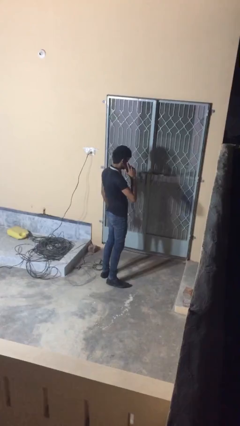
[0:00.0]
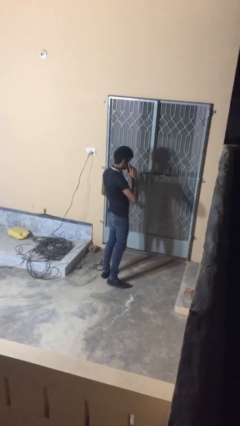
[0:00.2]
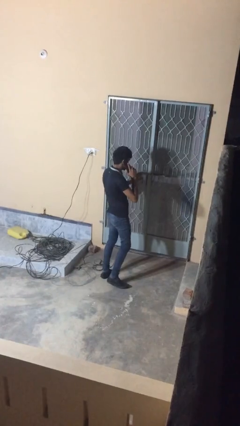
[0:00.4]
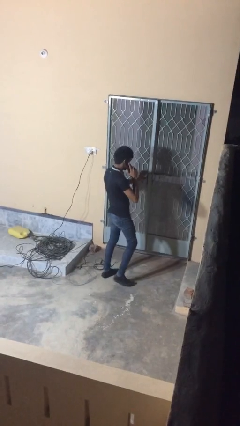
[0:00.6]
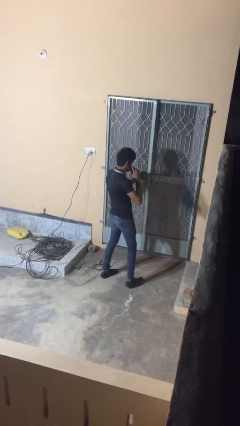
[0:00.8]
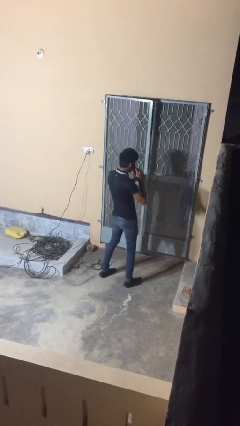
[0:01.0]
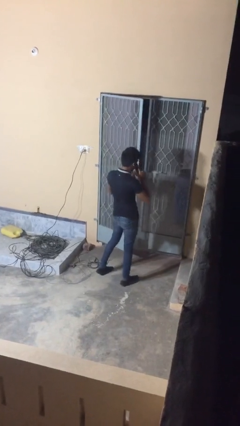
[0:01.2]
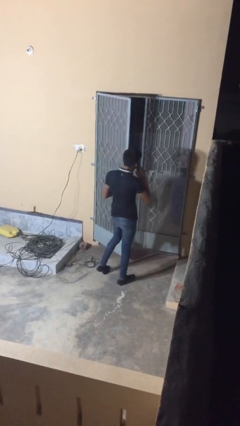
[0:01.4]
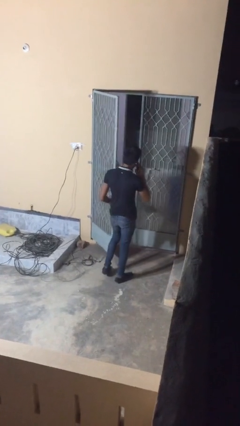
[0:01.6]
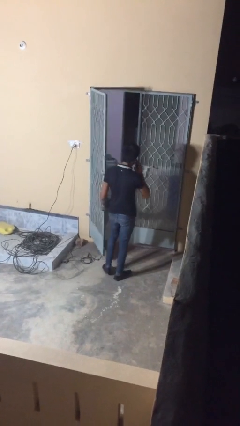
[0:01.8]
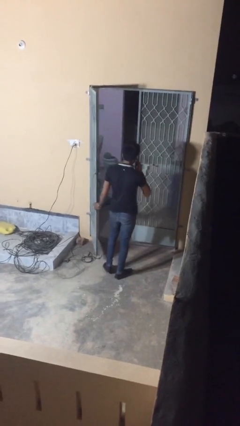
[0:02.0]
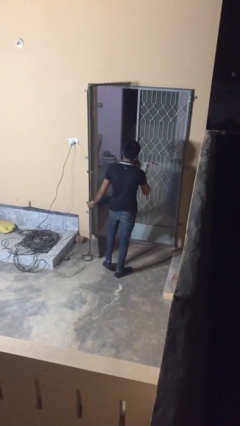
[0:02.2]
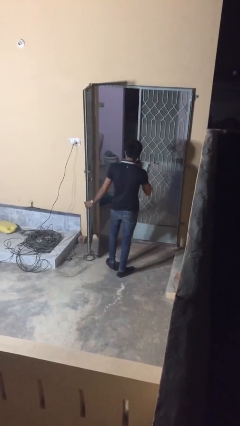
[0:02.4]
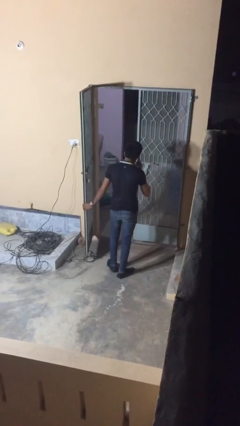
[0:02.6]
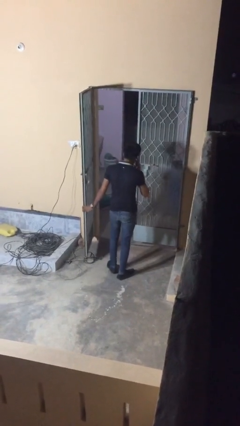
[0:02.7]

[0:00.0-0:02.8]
person opens facility door

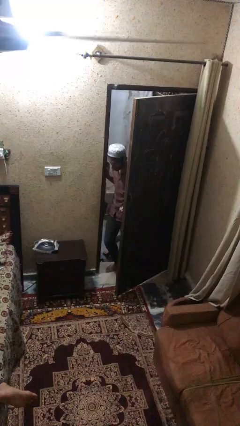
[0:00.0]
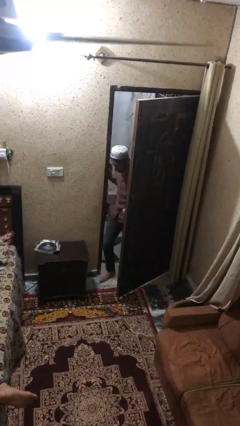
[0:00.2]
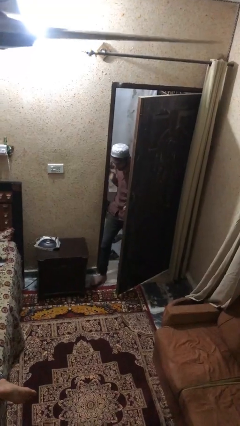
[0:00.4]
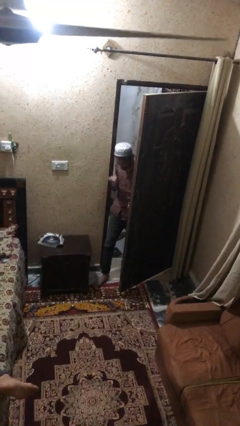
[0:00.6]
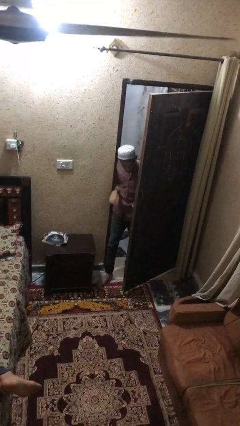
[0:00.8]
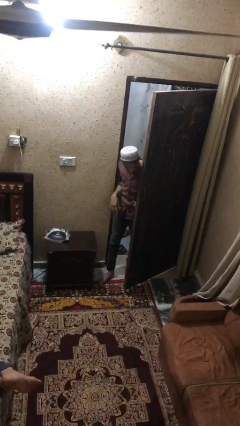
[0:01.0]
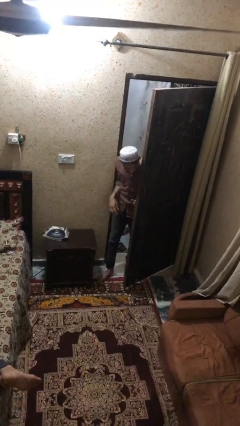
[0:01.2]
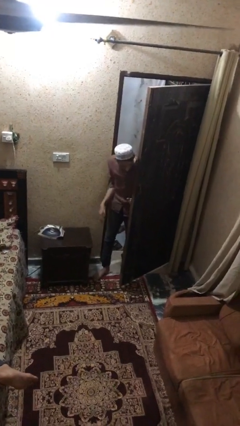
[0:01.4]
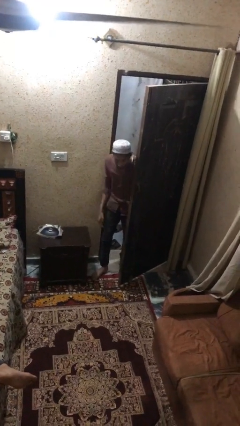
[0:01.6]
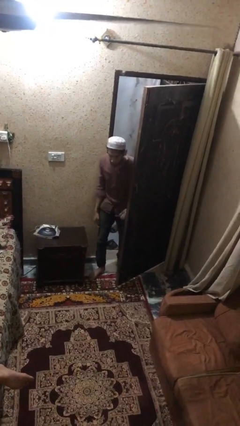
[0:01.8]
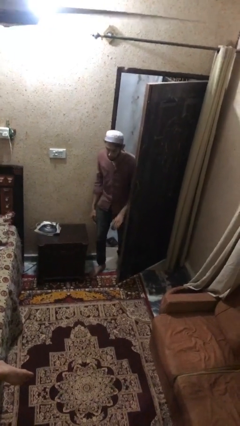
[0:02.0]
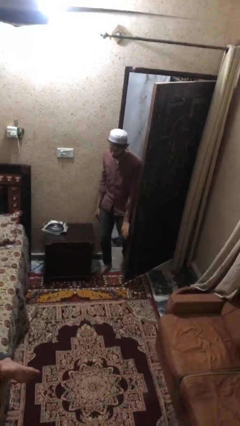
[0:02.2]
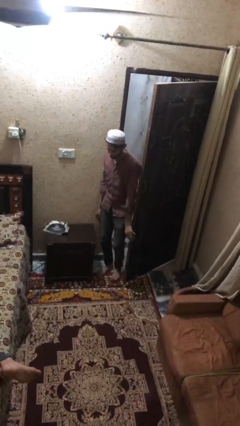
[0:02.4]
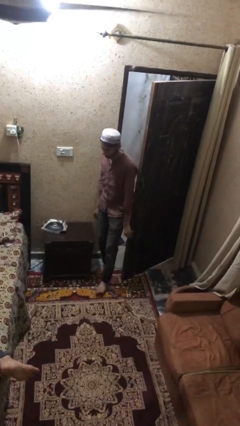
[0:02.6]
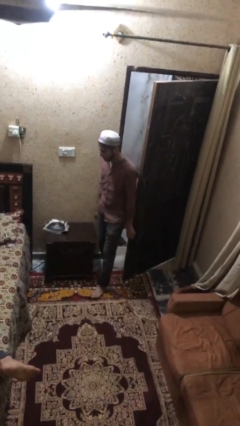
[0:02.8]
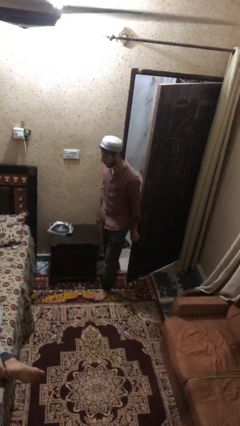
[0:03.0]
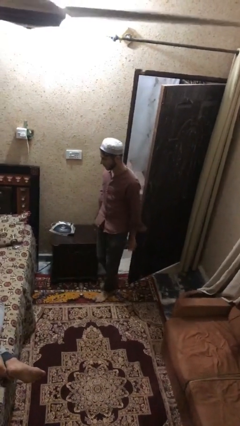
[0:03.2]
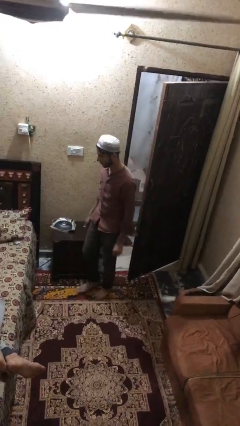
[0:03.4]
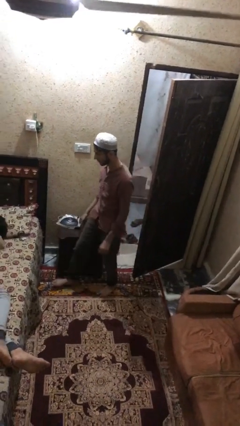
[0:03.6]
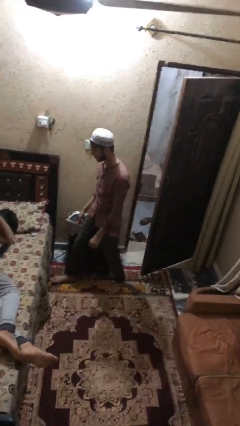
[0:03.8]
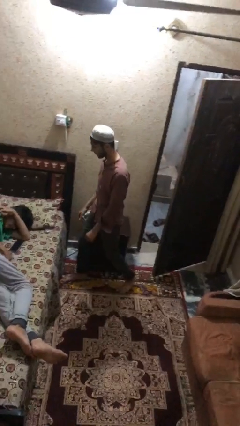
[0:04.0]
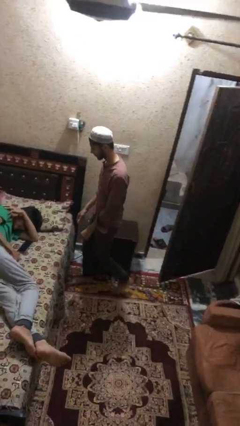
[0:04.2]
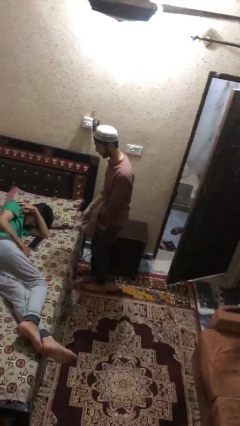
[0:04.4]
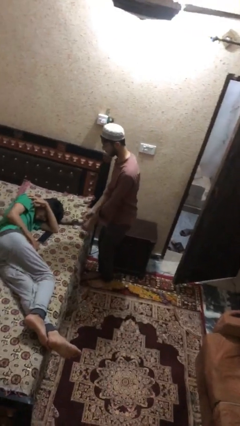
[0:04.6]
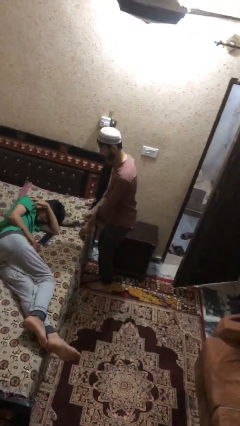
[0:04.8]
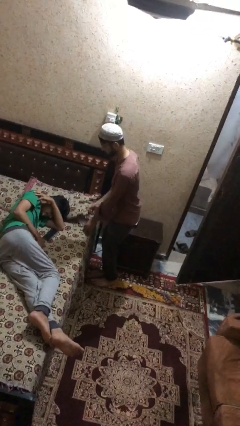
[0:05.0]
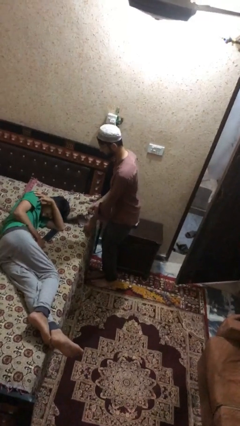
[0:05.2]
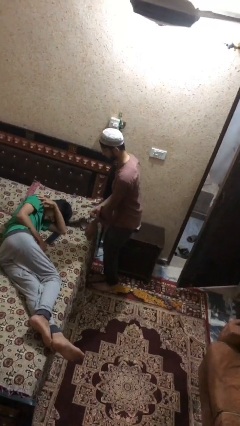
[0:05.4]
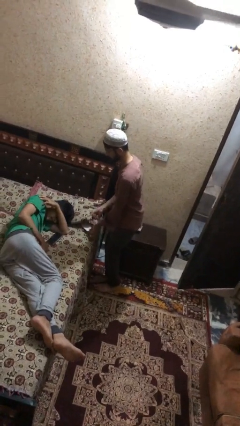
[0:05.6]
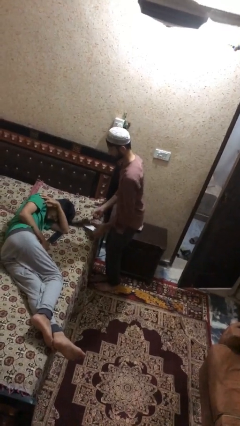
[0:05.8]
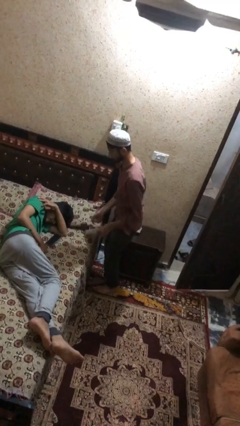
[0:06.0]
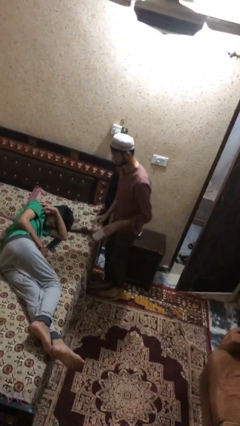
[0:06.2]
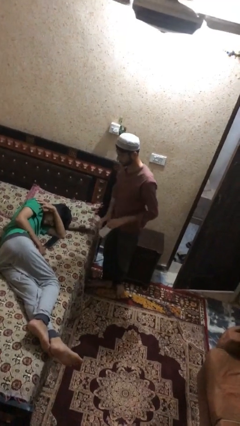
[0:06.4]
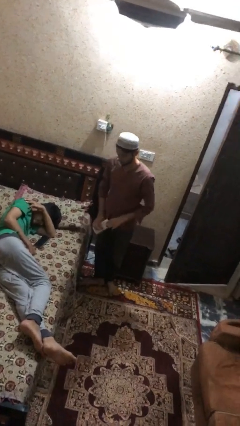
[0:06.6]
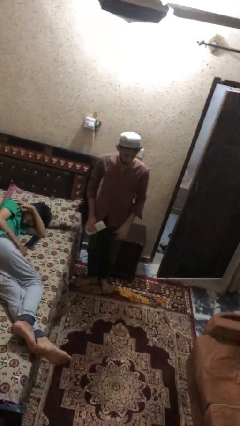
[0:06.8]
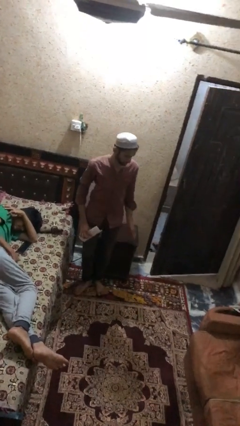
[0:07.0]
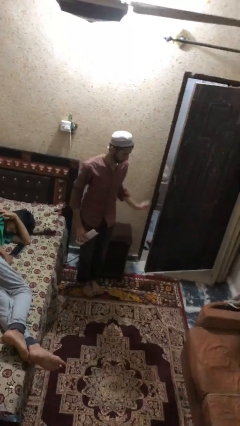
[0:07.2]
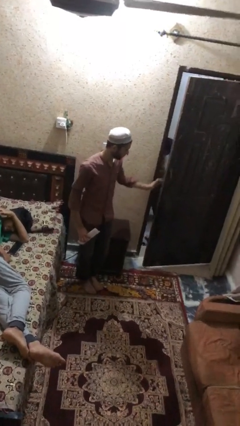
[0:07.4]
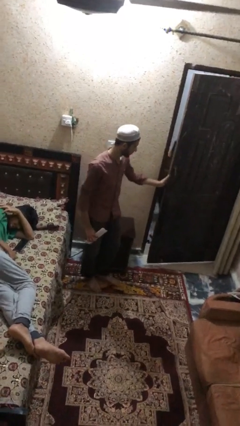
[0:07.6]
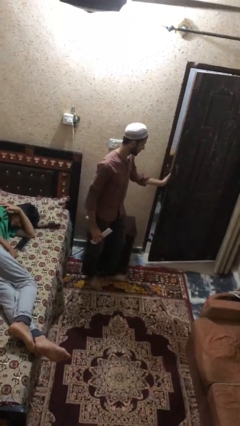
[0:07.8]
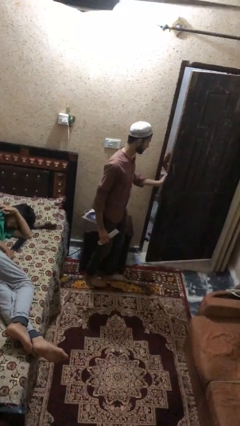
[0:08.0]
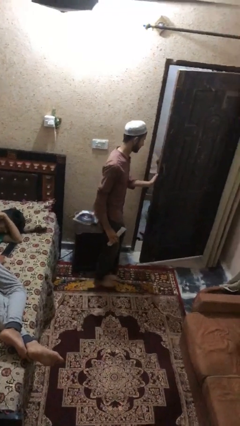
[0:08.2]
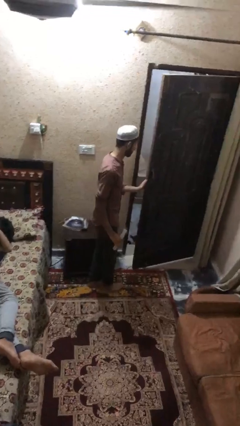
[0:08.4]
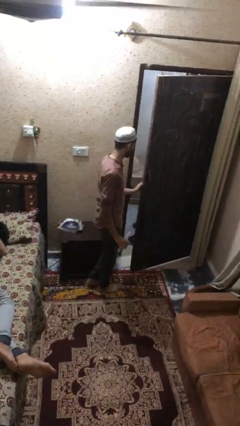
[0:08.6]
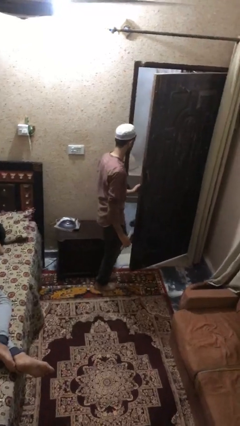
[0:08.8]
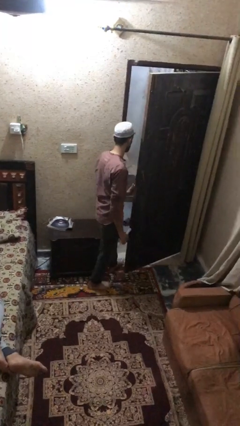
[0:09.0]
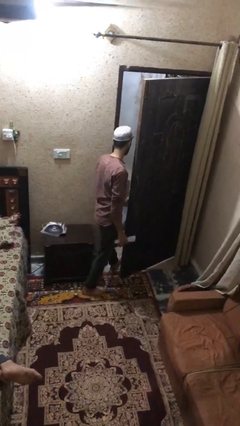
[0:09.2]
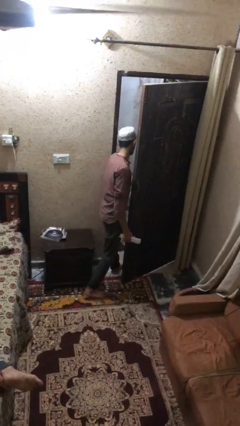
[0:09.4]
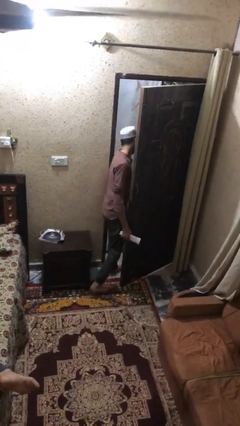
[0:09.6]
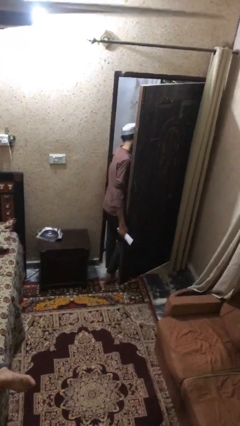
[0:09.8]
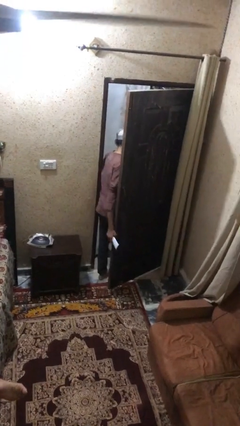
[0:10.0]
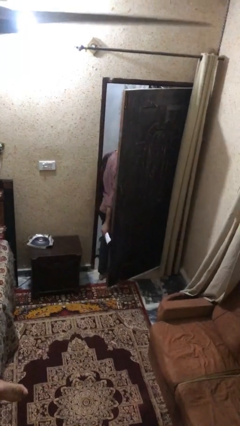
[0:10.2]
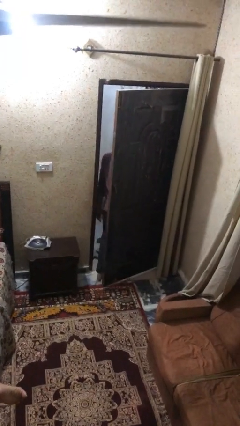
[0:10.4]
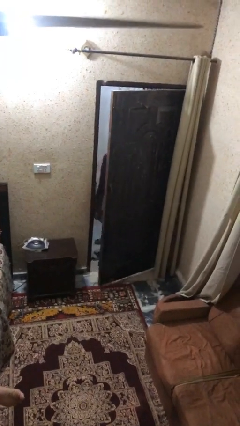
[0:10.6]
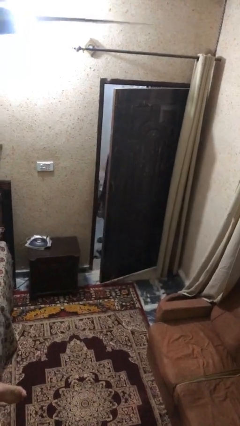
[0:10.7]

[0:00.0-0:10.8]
person steals object from person

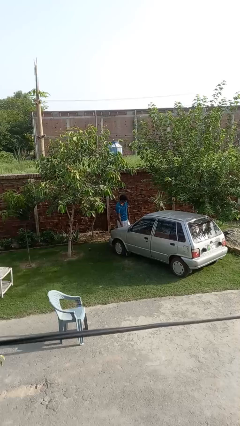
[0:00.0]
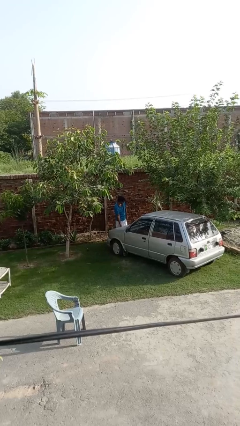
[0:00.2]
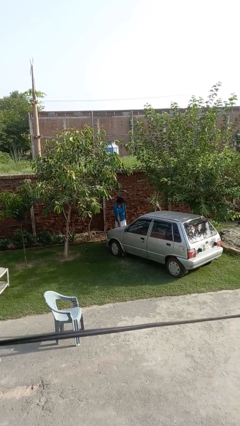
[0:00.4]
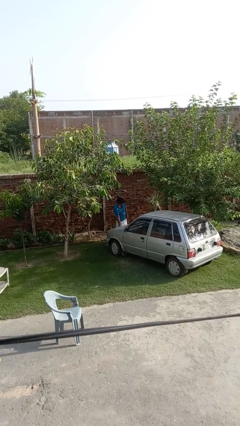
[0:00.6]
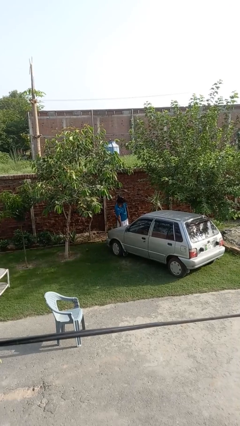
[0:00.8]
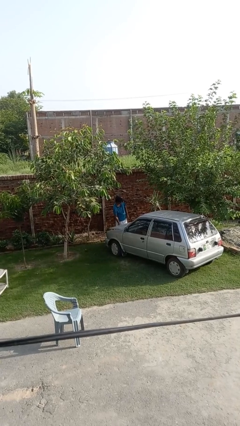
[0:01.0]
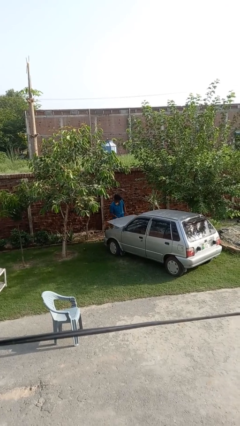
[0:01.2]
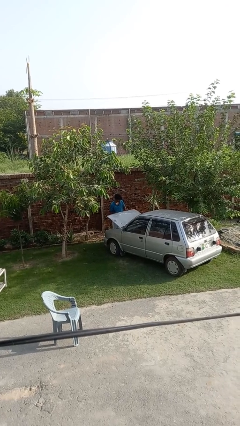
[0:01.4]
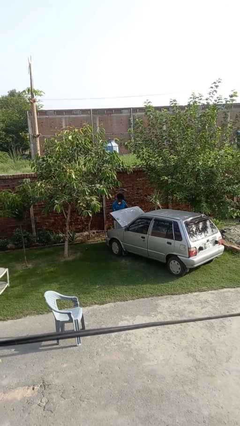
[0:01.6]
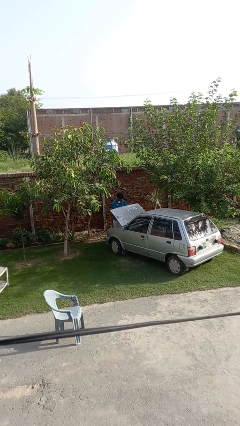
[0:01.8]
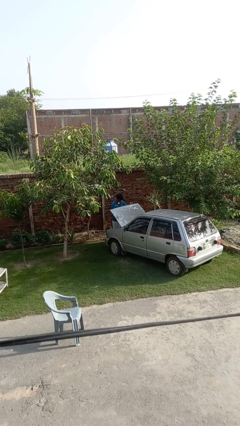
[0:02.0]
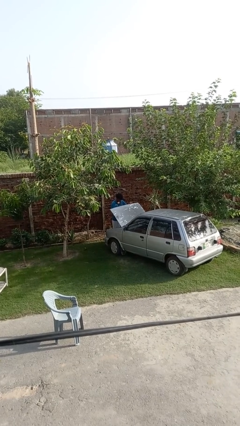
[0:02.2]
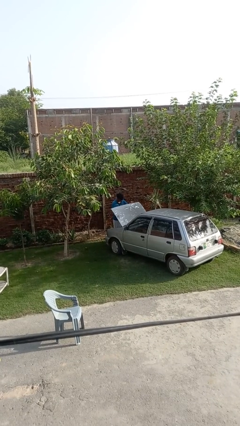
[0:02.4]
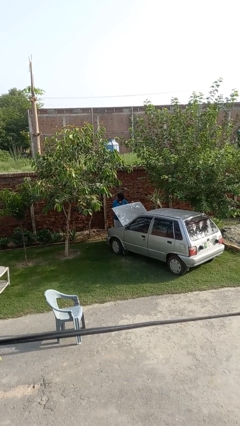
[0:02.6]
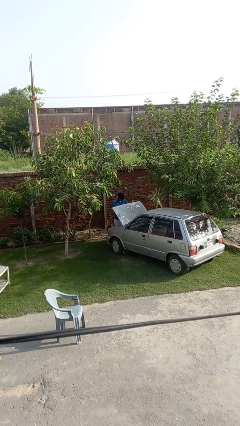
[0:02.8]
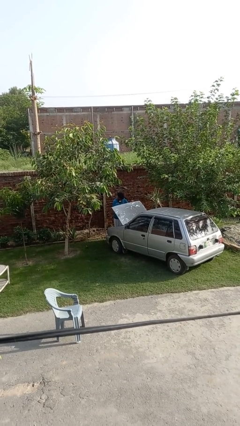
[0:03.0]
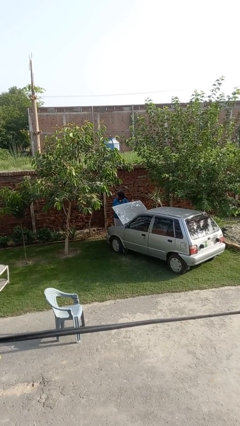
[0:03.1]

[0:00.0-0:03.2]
person opens car hood

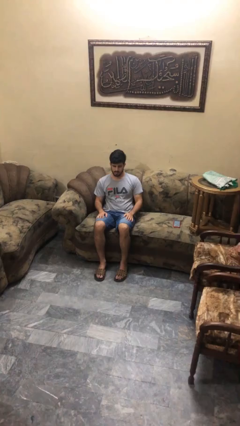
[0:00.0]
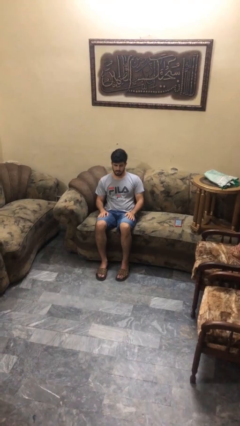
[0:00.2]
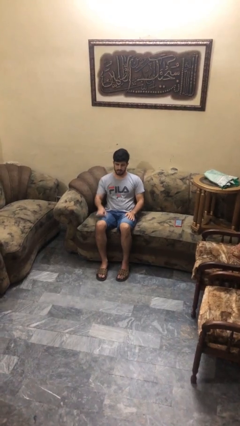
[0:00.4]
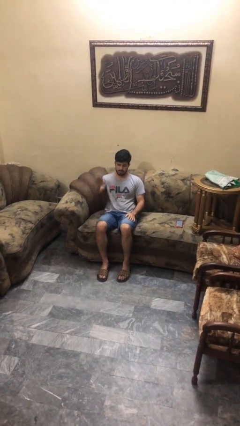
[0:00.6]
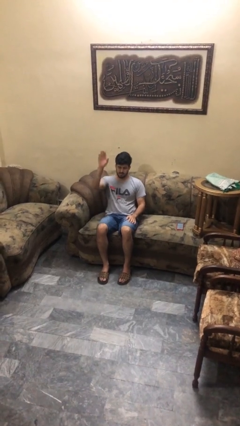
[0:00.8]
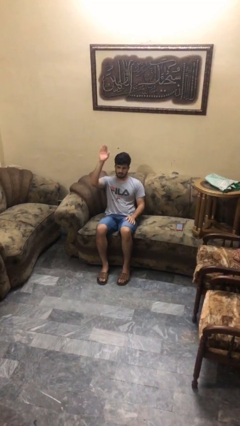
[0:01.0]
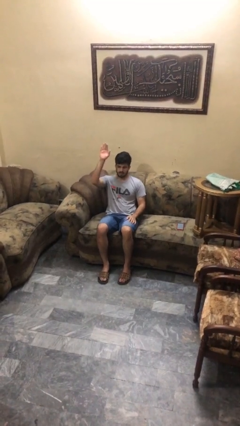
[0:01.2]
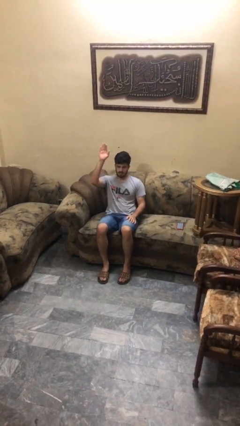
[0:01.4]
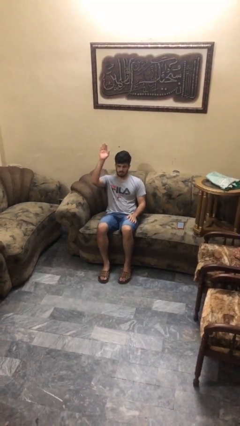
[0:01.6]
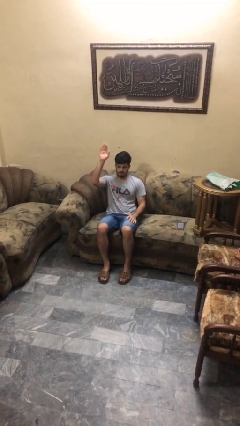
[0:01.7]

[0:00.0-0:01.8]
person gestures raise hand
